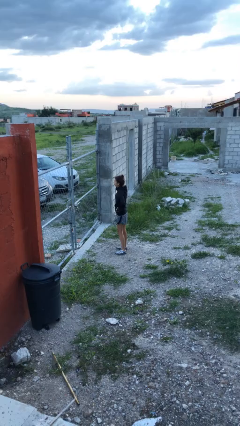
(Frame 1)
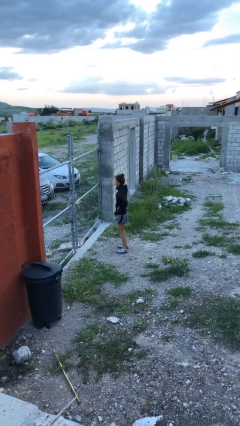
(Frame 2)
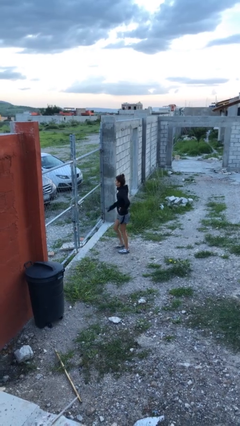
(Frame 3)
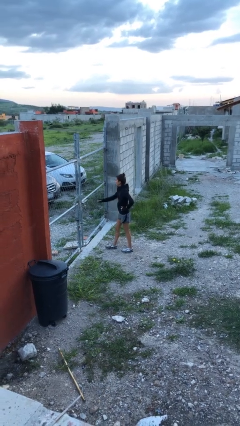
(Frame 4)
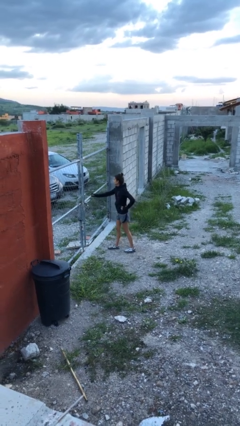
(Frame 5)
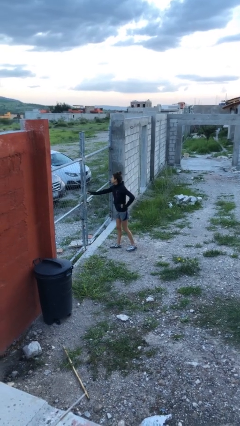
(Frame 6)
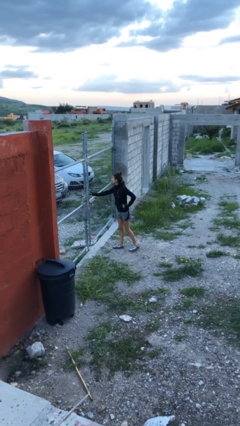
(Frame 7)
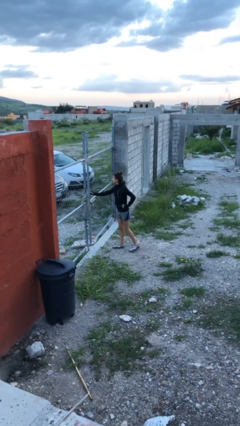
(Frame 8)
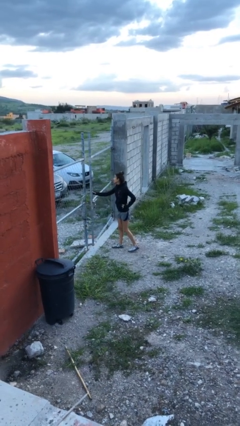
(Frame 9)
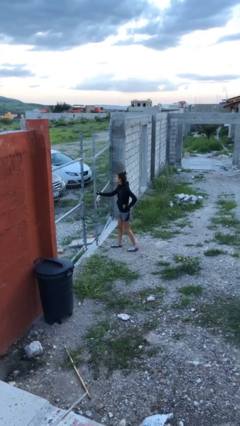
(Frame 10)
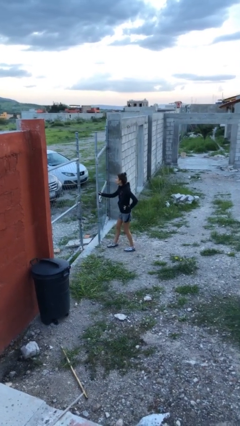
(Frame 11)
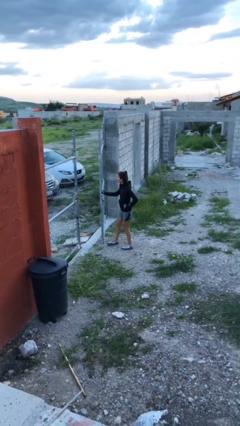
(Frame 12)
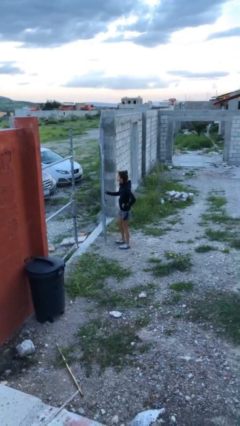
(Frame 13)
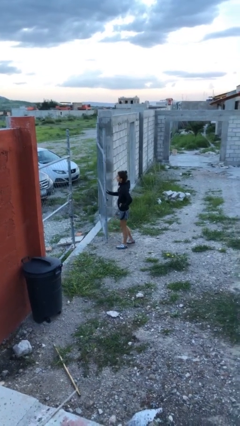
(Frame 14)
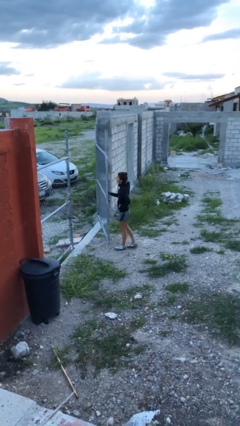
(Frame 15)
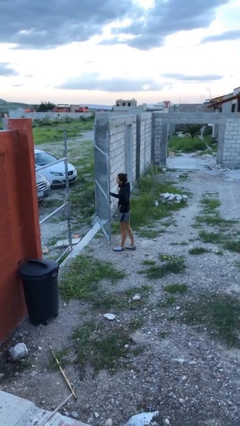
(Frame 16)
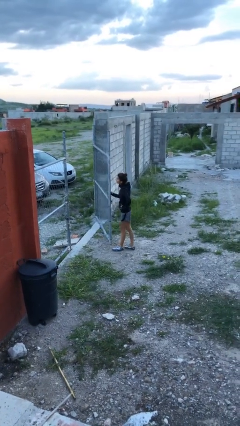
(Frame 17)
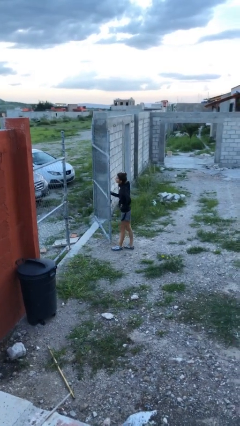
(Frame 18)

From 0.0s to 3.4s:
person opens gate

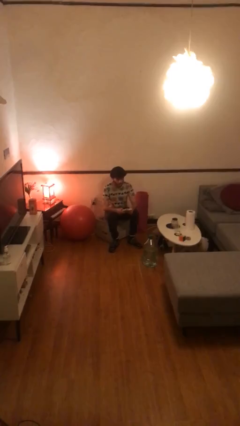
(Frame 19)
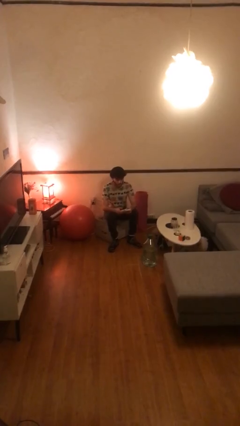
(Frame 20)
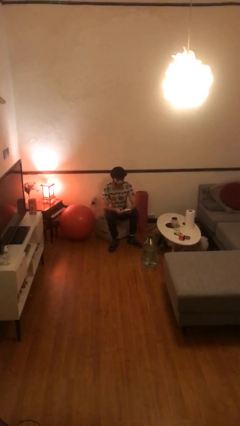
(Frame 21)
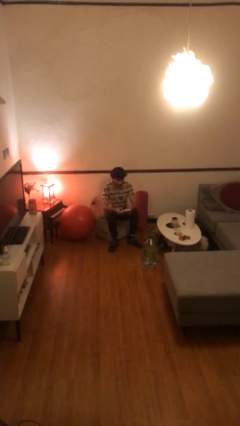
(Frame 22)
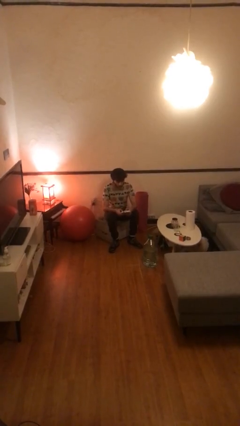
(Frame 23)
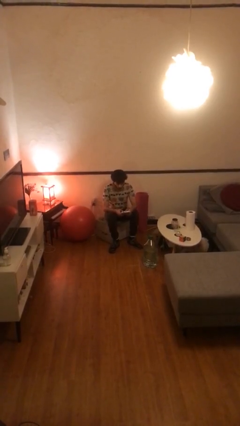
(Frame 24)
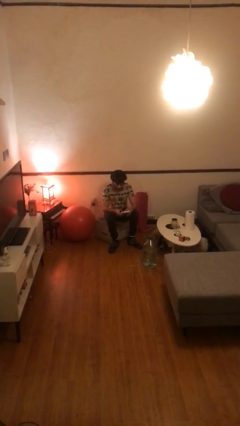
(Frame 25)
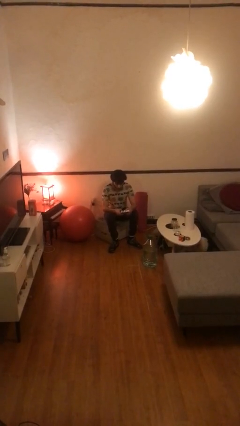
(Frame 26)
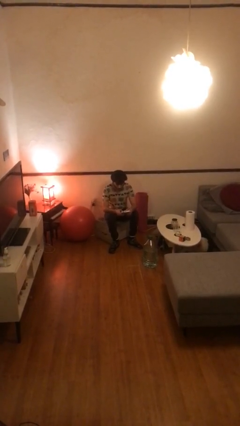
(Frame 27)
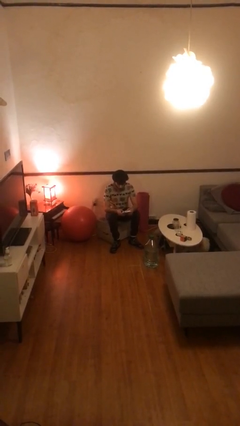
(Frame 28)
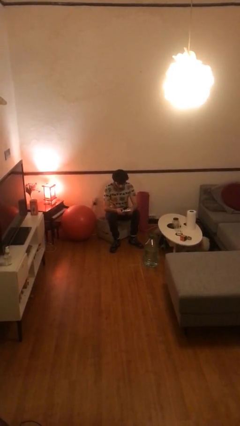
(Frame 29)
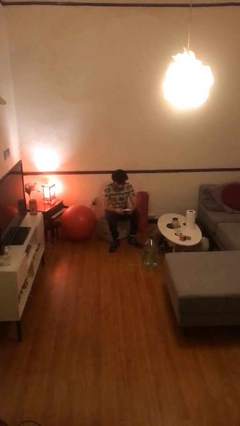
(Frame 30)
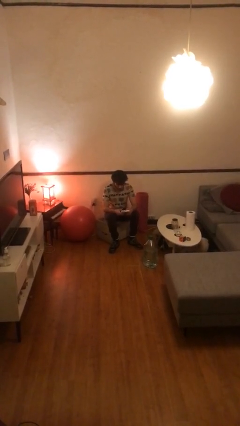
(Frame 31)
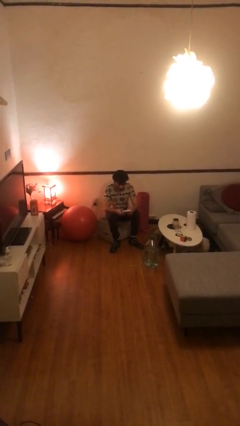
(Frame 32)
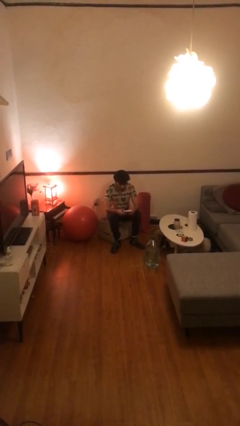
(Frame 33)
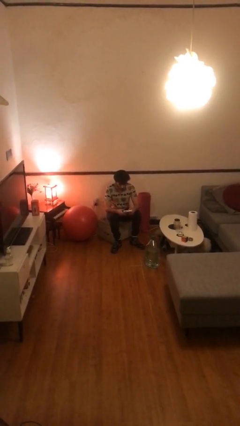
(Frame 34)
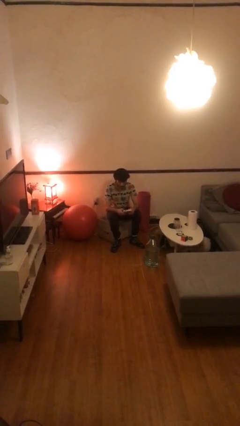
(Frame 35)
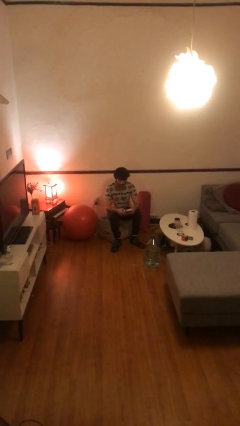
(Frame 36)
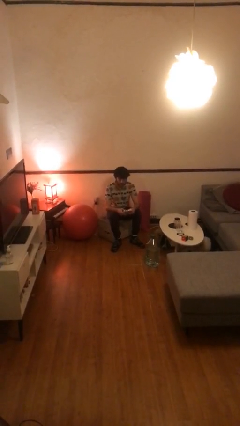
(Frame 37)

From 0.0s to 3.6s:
person interacts with handheld game

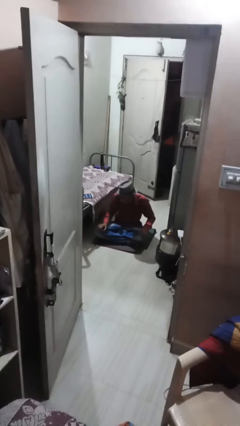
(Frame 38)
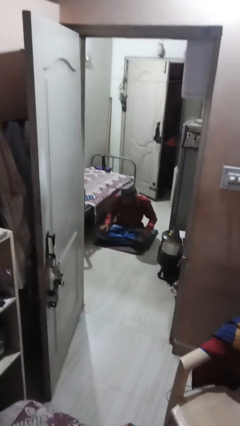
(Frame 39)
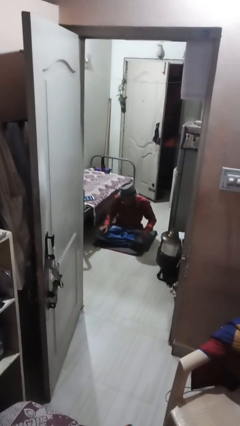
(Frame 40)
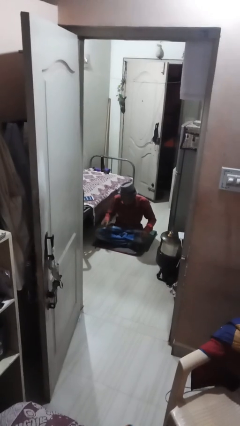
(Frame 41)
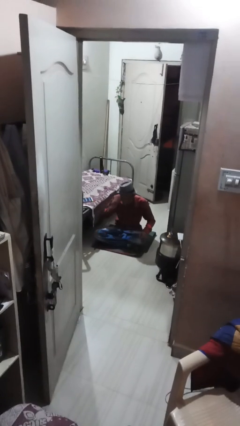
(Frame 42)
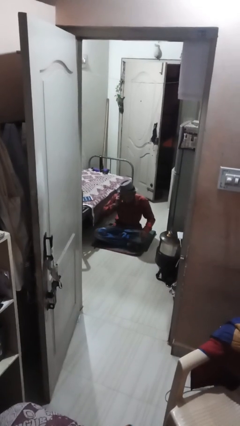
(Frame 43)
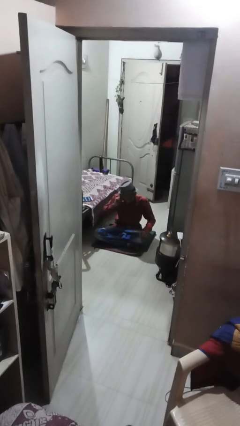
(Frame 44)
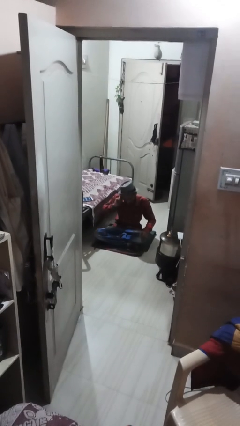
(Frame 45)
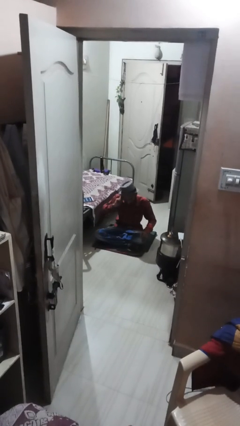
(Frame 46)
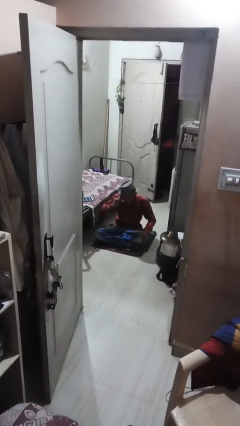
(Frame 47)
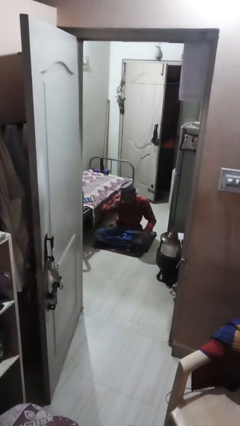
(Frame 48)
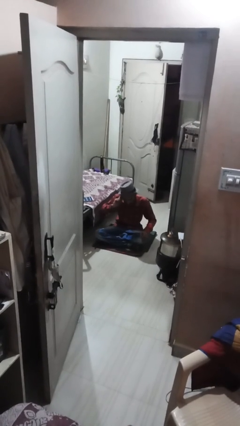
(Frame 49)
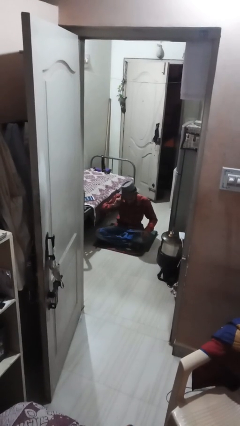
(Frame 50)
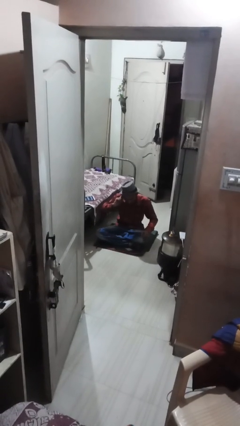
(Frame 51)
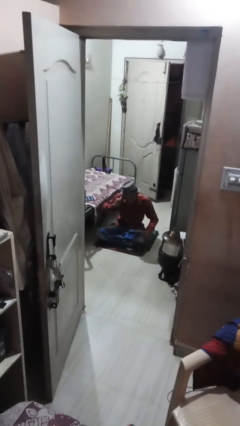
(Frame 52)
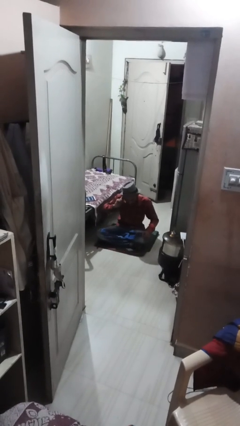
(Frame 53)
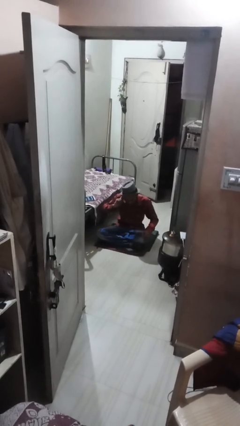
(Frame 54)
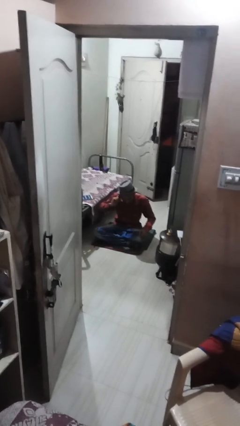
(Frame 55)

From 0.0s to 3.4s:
person touches earlobe

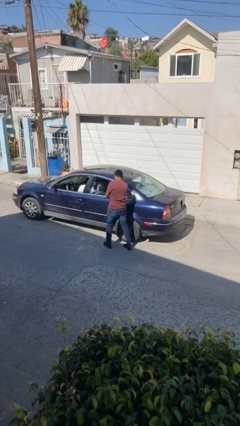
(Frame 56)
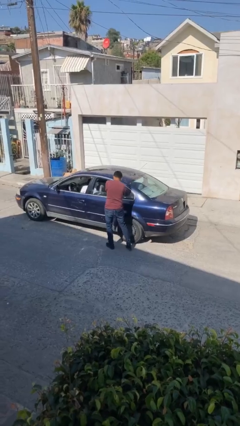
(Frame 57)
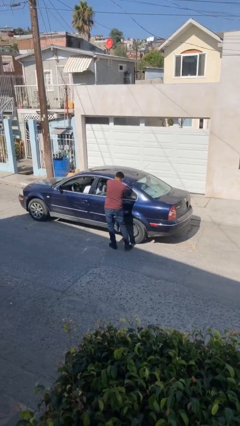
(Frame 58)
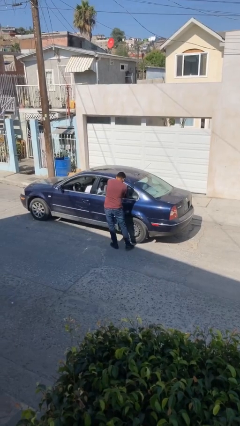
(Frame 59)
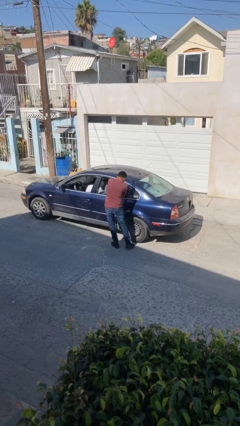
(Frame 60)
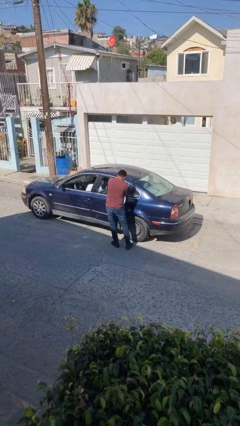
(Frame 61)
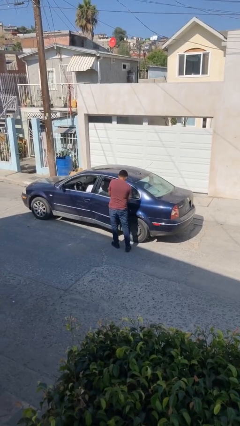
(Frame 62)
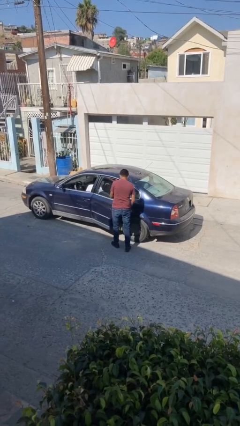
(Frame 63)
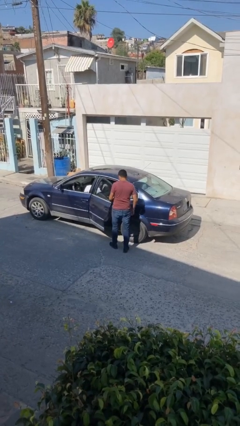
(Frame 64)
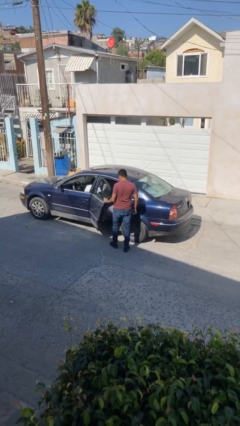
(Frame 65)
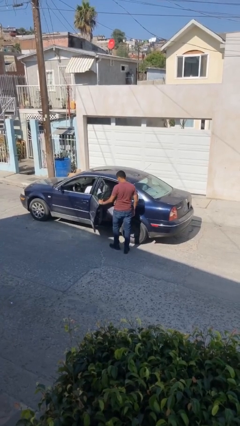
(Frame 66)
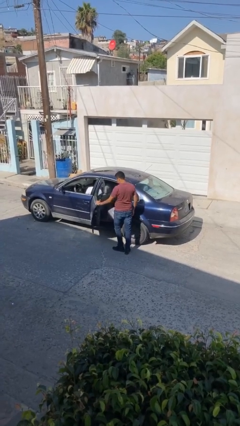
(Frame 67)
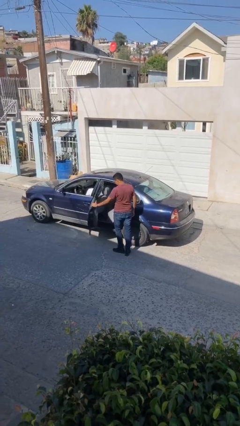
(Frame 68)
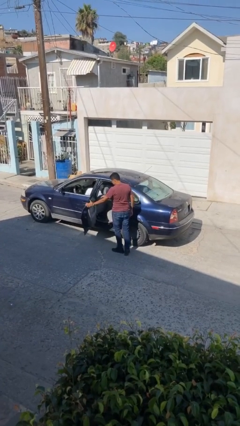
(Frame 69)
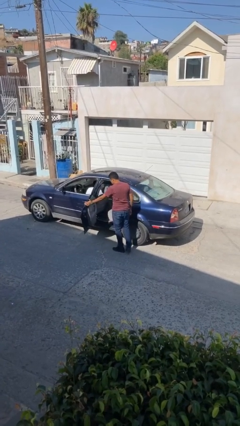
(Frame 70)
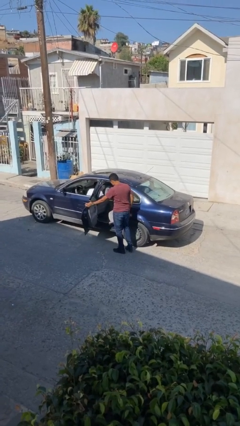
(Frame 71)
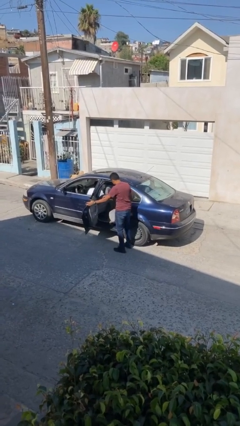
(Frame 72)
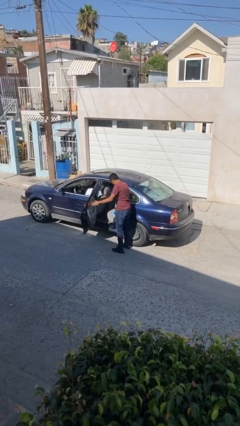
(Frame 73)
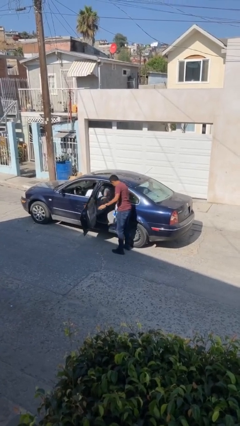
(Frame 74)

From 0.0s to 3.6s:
person opens car door

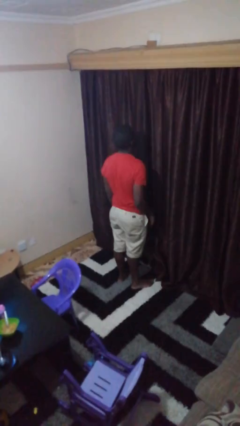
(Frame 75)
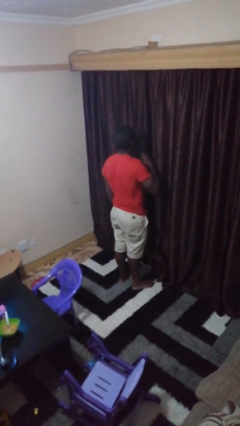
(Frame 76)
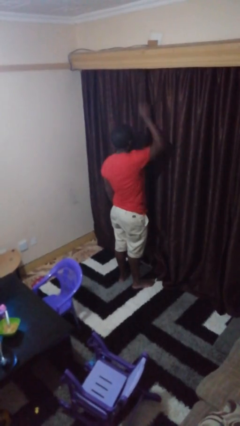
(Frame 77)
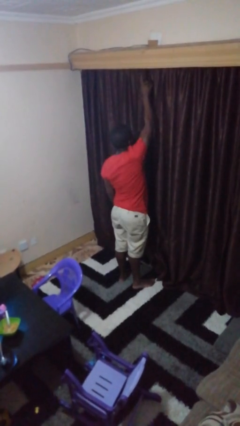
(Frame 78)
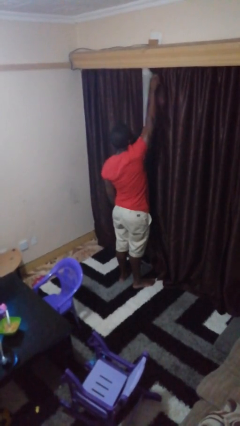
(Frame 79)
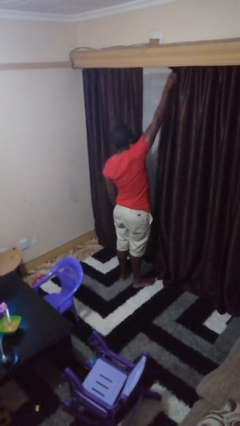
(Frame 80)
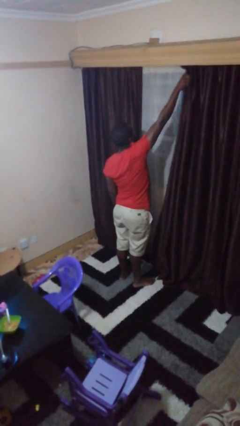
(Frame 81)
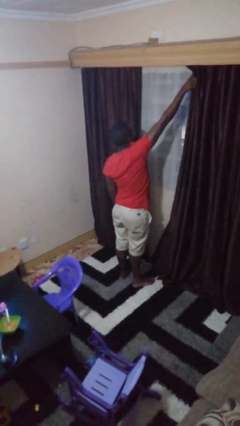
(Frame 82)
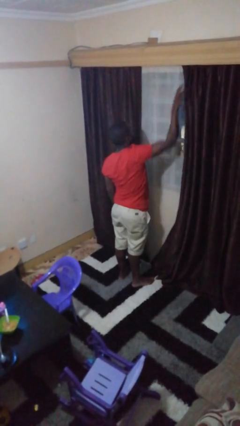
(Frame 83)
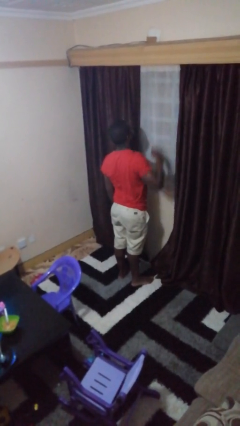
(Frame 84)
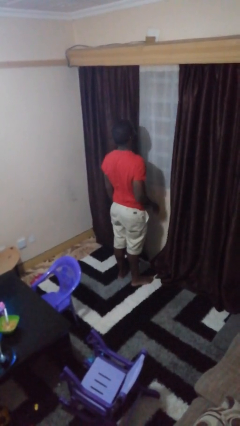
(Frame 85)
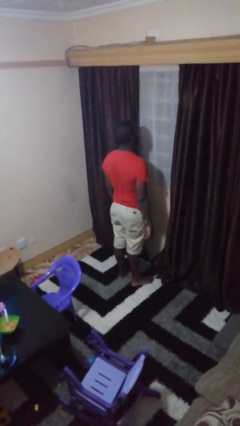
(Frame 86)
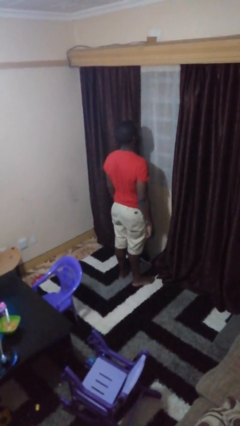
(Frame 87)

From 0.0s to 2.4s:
person opens curtains

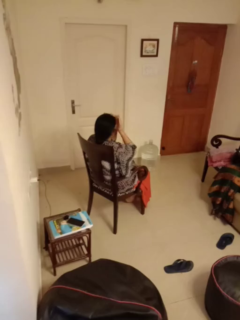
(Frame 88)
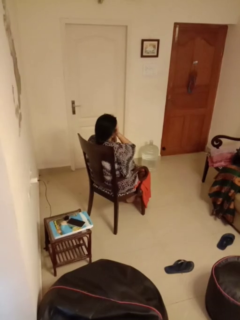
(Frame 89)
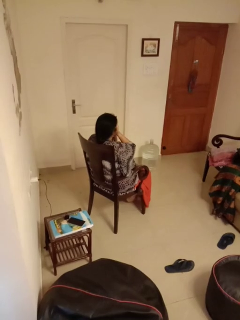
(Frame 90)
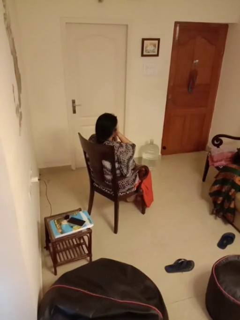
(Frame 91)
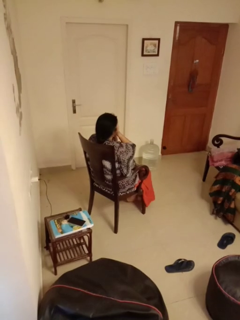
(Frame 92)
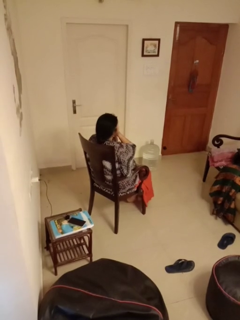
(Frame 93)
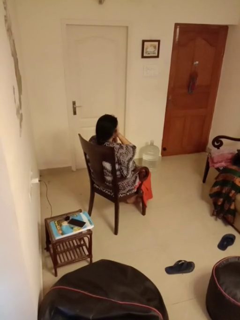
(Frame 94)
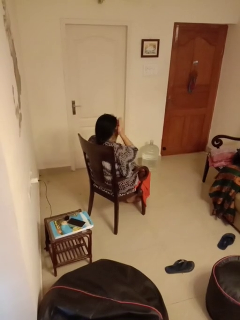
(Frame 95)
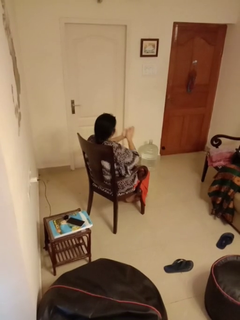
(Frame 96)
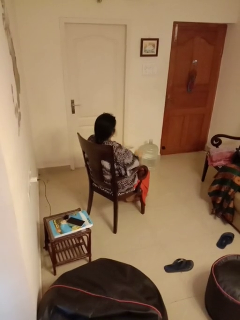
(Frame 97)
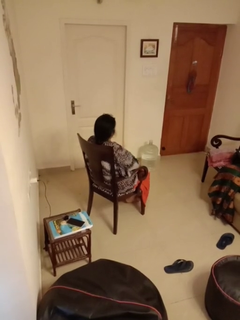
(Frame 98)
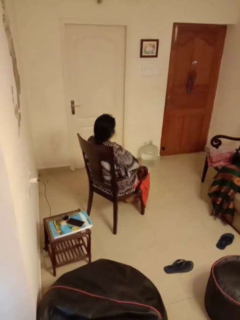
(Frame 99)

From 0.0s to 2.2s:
person covers face with hands
